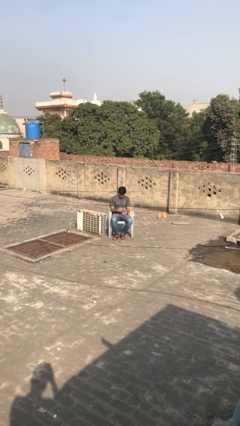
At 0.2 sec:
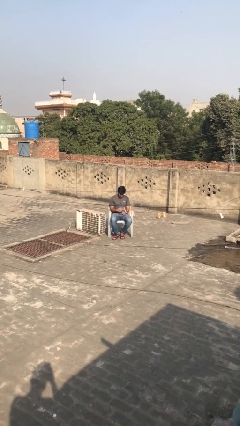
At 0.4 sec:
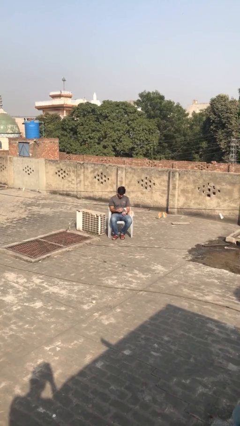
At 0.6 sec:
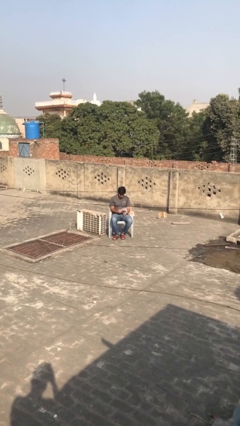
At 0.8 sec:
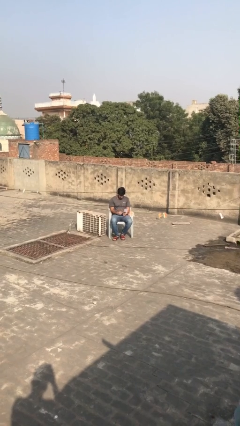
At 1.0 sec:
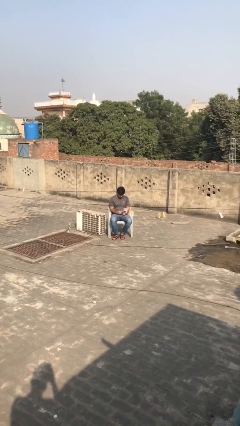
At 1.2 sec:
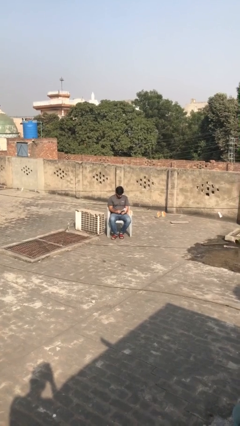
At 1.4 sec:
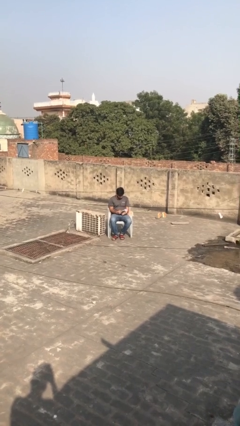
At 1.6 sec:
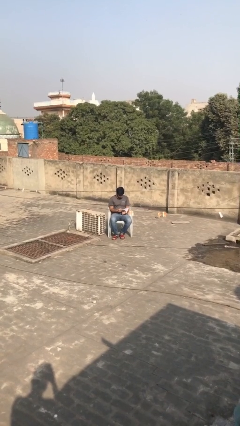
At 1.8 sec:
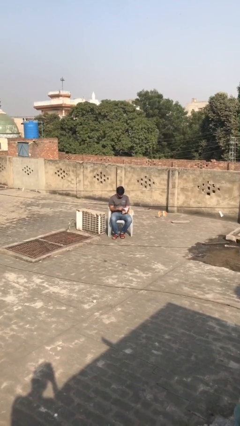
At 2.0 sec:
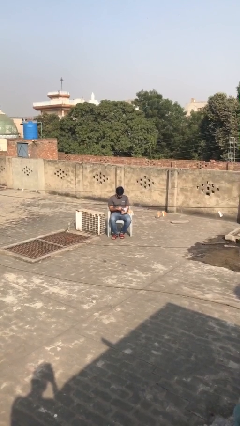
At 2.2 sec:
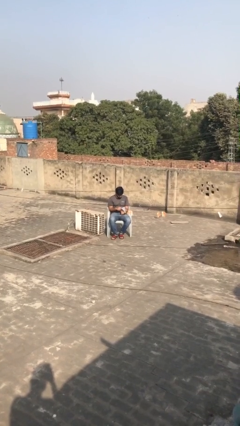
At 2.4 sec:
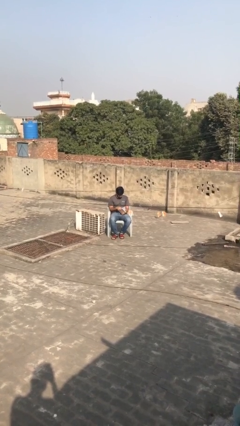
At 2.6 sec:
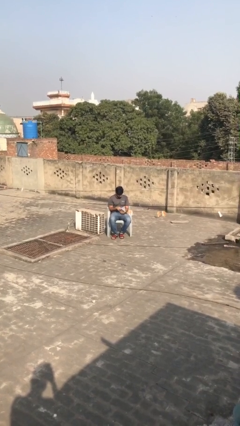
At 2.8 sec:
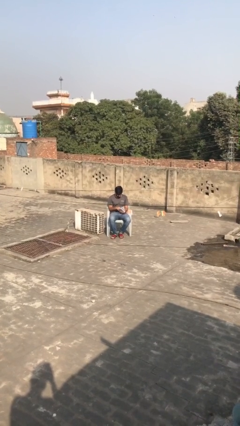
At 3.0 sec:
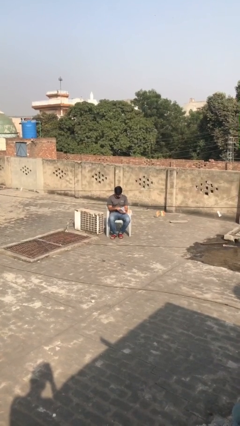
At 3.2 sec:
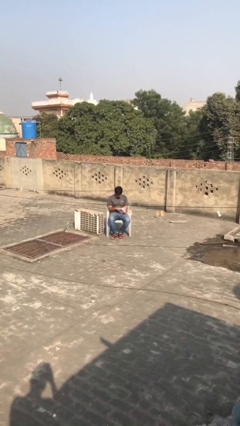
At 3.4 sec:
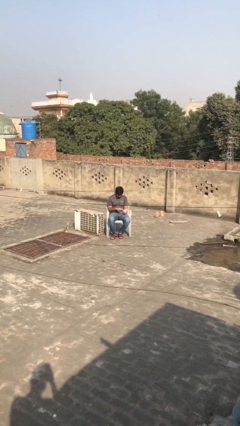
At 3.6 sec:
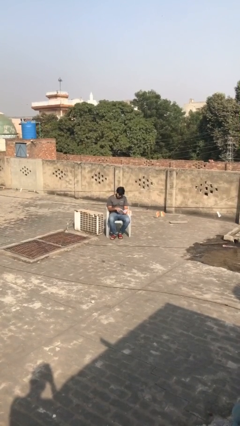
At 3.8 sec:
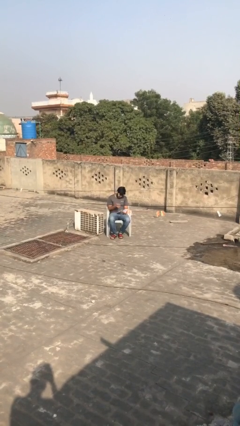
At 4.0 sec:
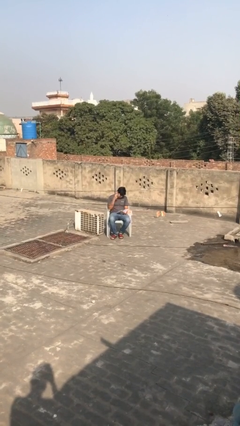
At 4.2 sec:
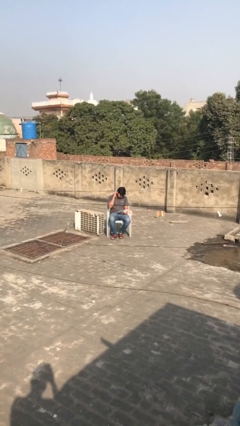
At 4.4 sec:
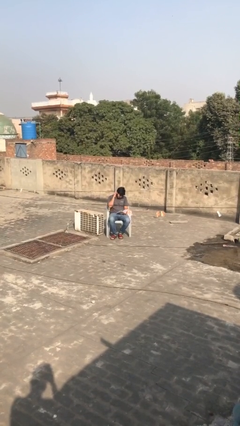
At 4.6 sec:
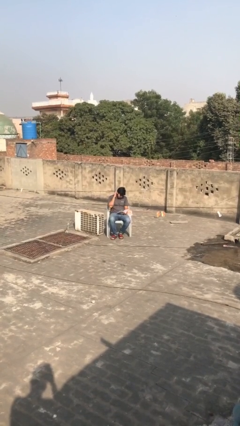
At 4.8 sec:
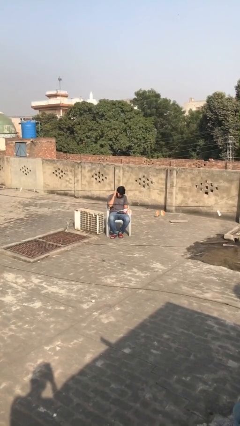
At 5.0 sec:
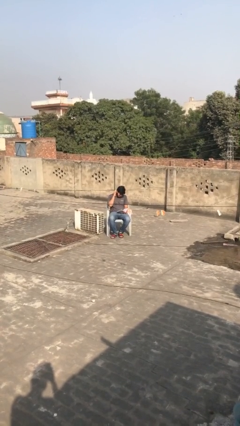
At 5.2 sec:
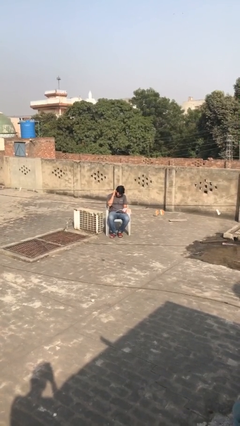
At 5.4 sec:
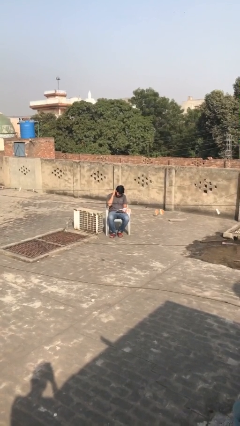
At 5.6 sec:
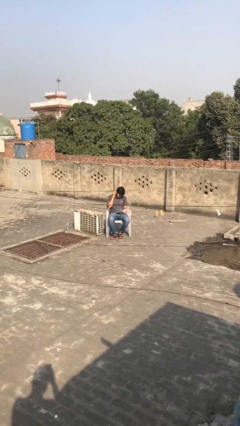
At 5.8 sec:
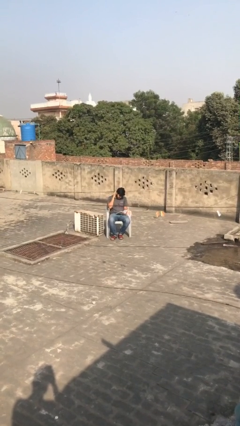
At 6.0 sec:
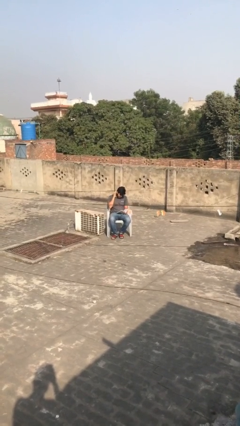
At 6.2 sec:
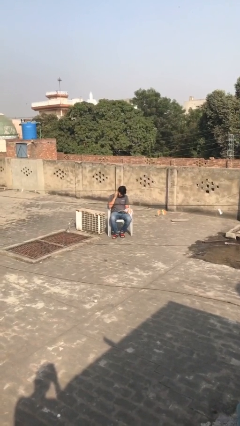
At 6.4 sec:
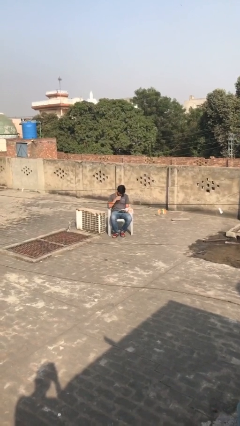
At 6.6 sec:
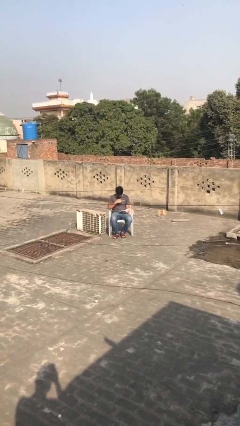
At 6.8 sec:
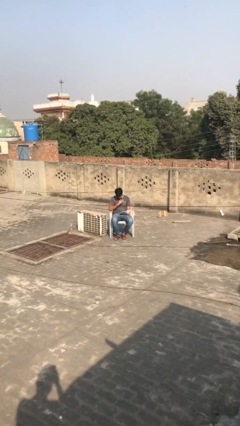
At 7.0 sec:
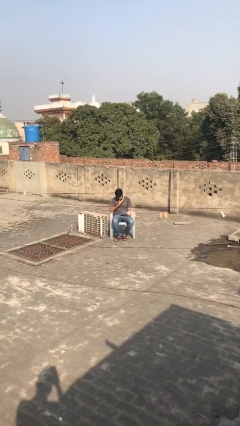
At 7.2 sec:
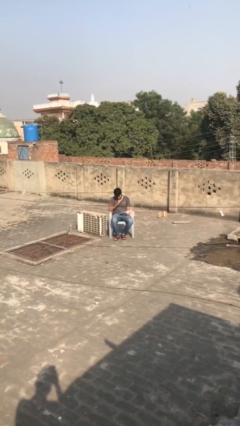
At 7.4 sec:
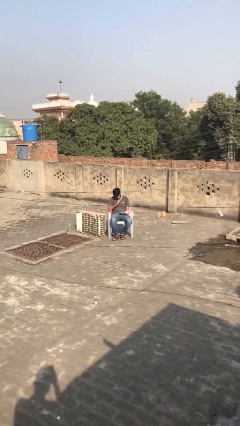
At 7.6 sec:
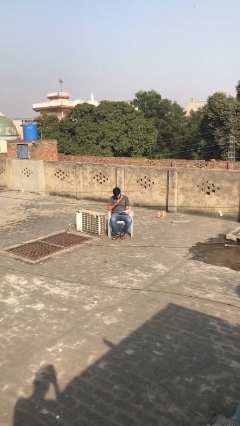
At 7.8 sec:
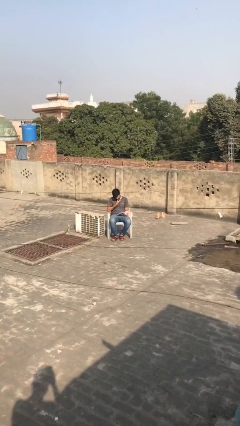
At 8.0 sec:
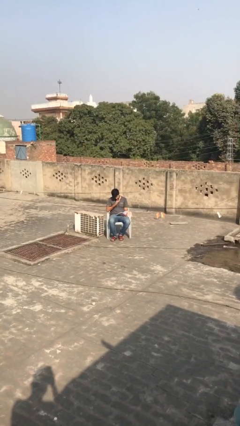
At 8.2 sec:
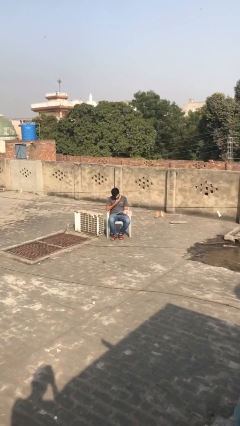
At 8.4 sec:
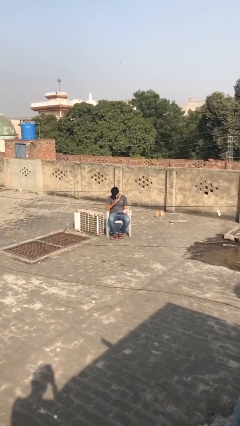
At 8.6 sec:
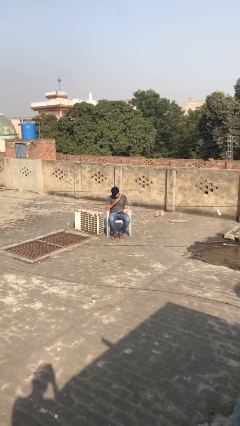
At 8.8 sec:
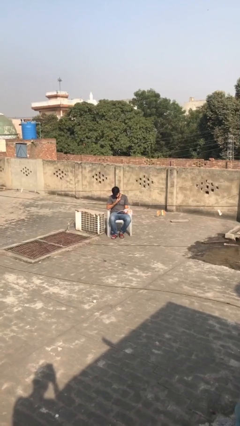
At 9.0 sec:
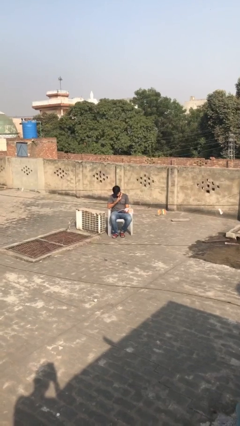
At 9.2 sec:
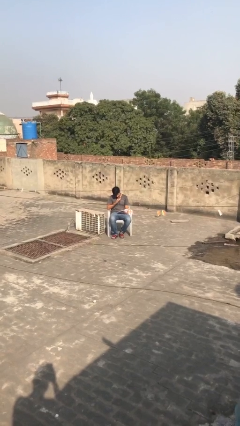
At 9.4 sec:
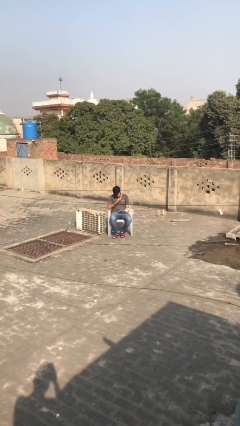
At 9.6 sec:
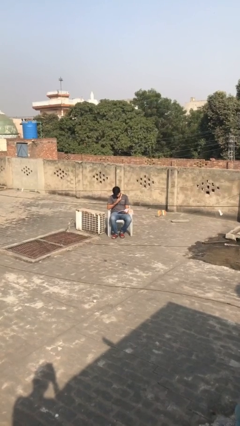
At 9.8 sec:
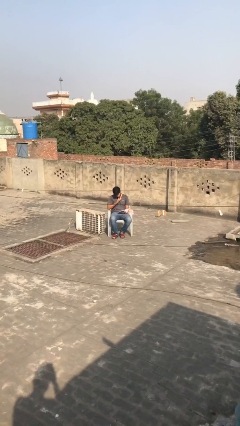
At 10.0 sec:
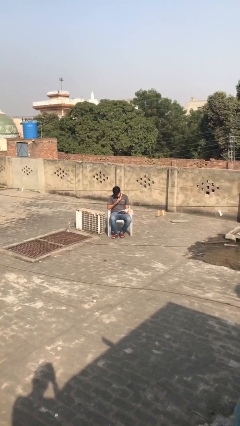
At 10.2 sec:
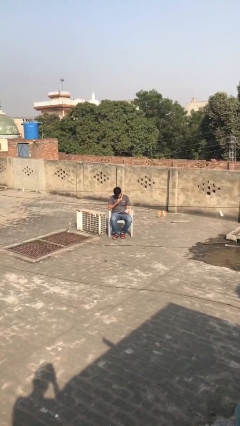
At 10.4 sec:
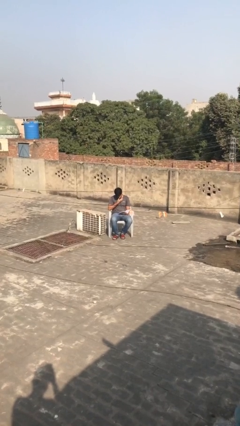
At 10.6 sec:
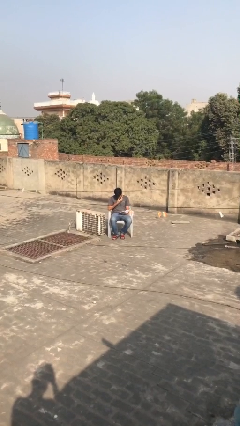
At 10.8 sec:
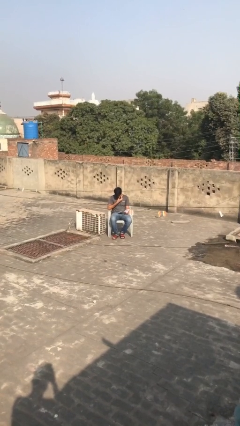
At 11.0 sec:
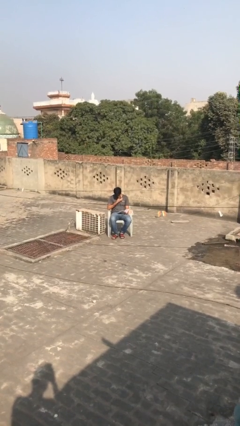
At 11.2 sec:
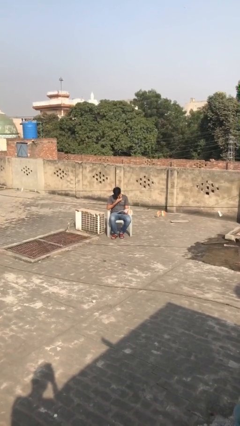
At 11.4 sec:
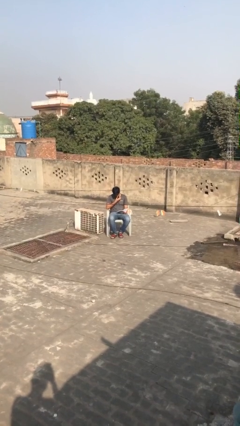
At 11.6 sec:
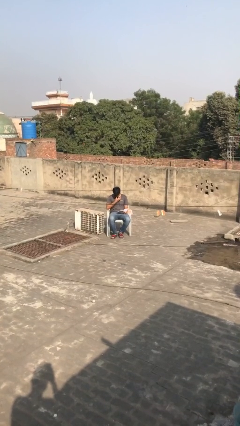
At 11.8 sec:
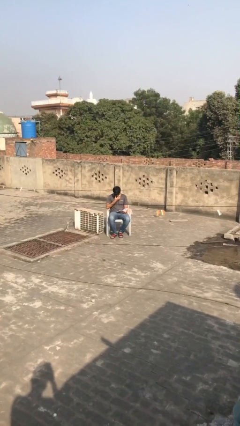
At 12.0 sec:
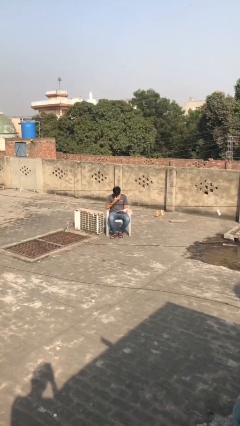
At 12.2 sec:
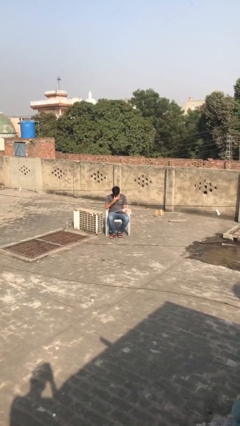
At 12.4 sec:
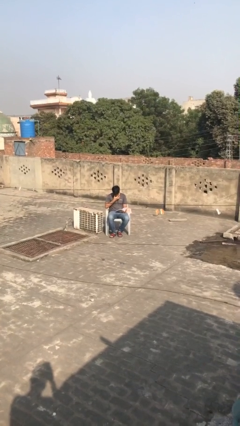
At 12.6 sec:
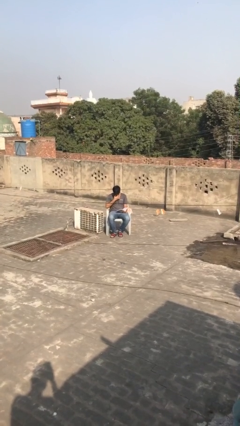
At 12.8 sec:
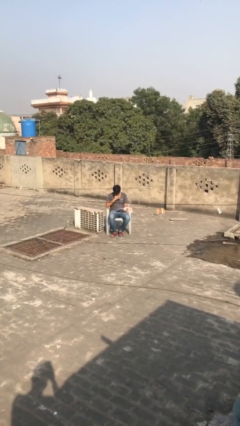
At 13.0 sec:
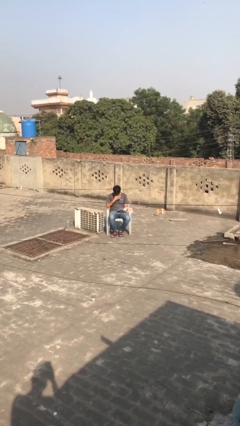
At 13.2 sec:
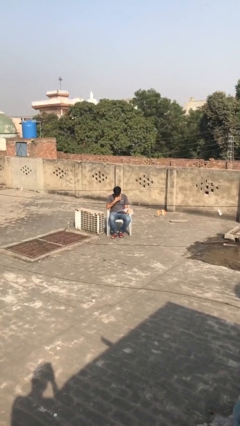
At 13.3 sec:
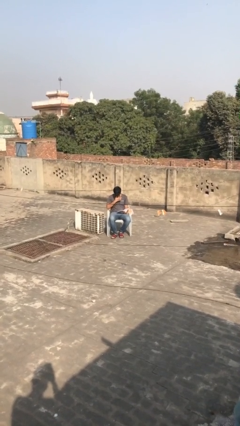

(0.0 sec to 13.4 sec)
person reads document

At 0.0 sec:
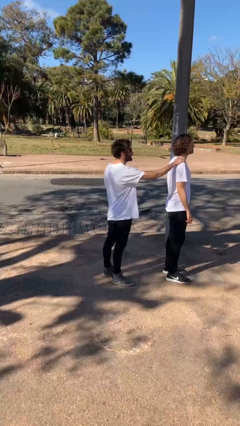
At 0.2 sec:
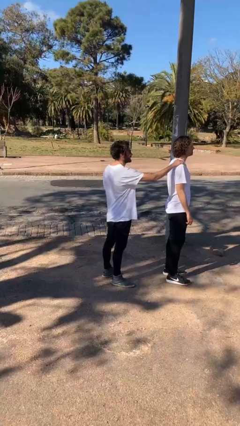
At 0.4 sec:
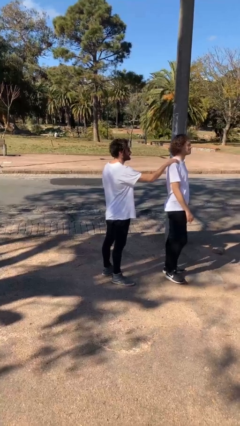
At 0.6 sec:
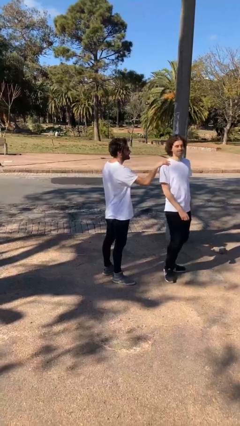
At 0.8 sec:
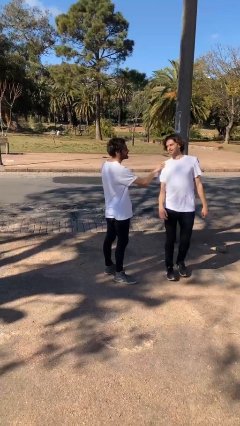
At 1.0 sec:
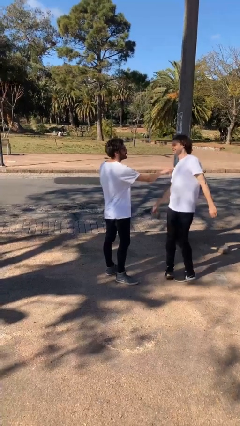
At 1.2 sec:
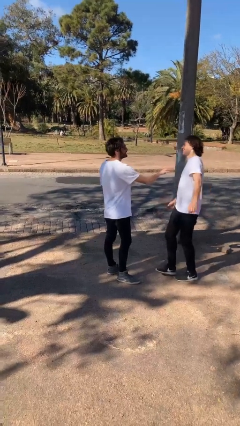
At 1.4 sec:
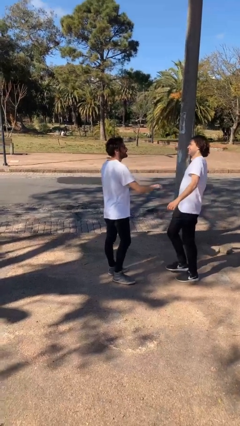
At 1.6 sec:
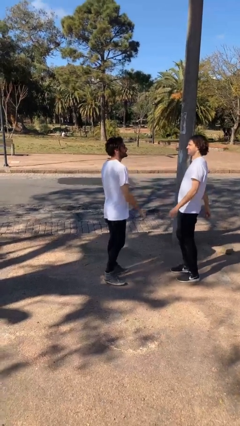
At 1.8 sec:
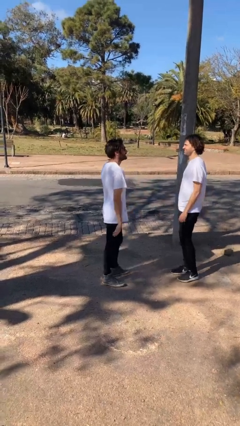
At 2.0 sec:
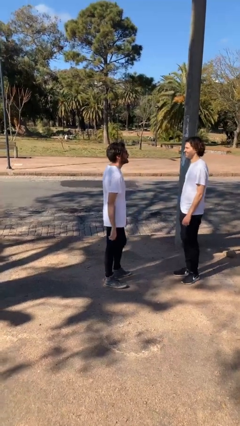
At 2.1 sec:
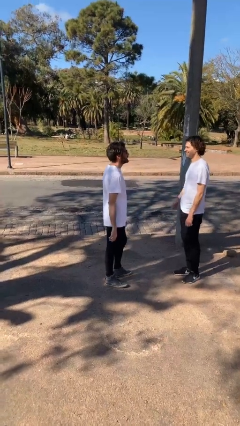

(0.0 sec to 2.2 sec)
person spins person around

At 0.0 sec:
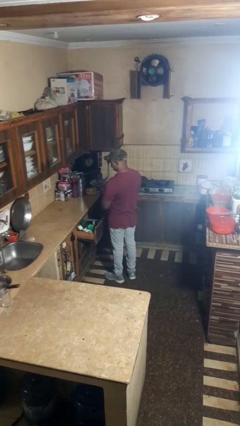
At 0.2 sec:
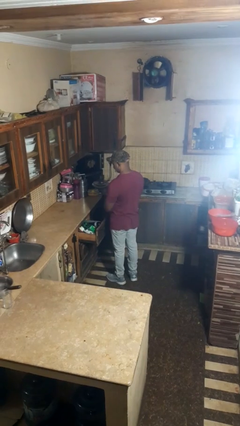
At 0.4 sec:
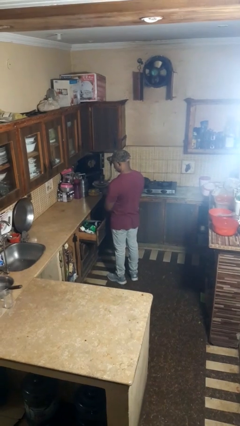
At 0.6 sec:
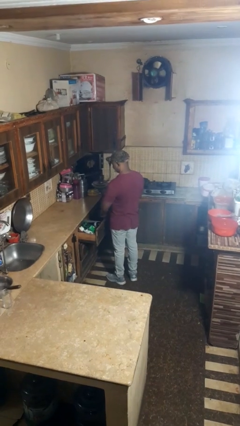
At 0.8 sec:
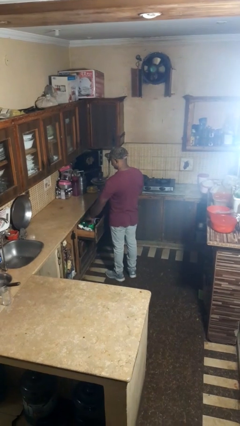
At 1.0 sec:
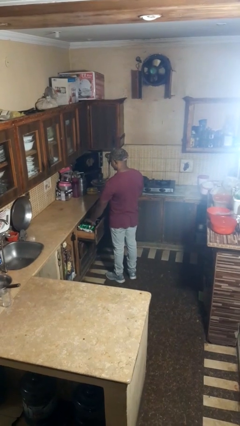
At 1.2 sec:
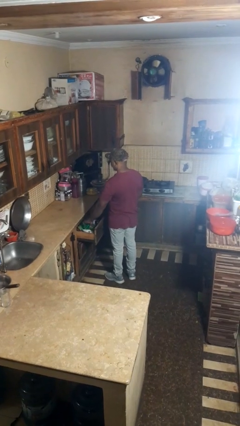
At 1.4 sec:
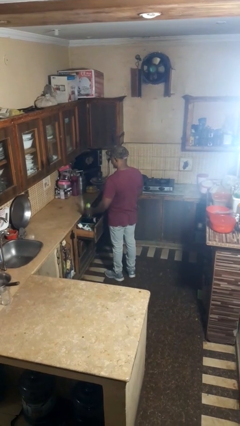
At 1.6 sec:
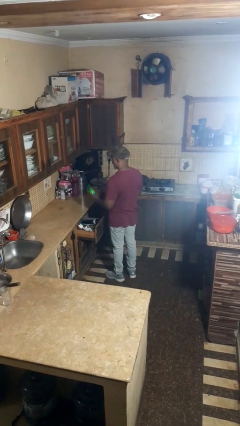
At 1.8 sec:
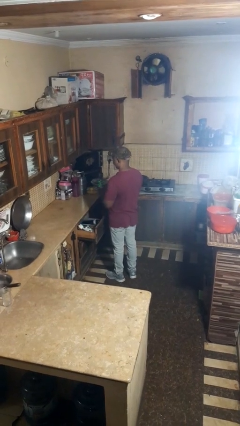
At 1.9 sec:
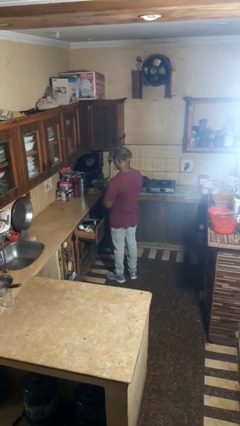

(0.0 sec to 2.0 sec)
person takes object from kitchen drawer

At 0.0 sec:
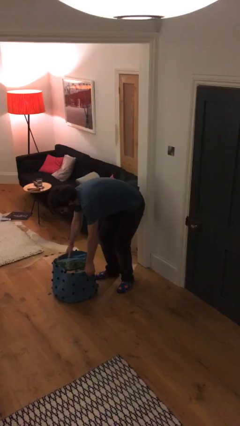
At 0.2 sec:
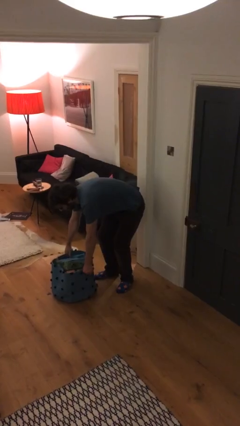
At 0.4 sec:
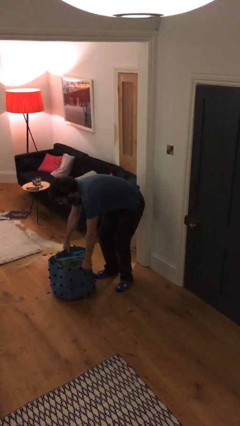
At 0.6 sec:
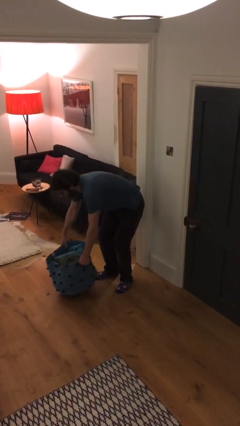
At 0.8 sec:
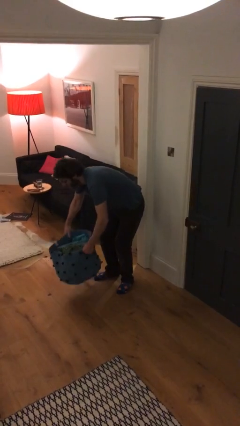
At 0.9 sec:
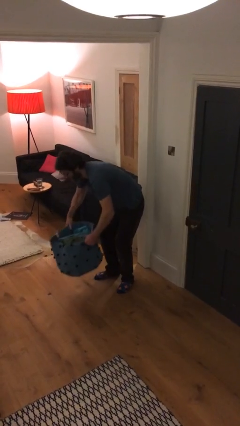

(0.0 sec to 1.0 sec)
person picks up object from floor
